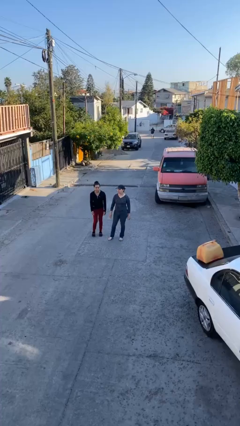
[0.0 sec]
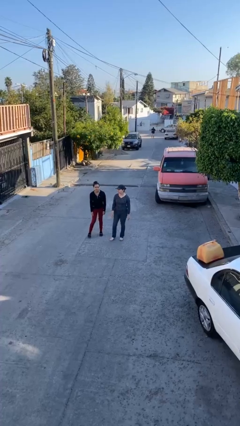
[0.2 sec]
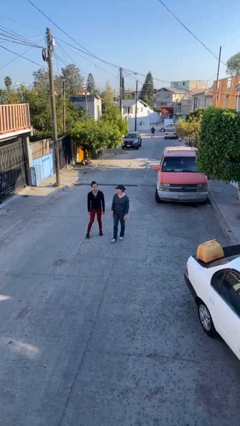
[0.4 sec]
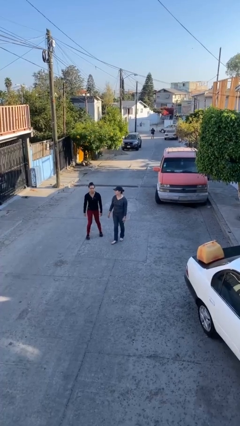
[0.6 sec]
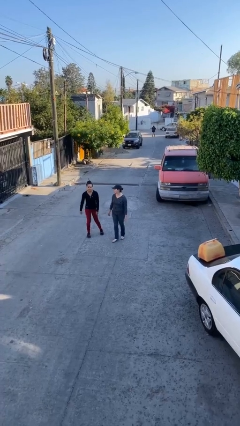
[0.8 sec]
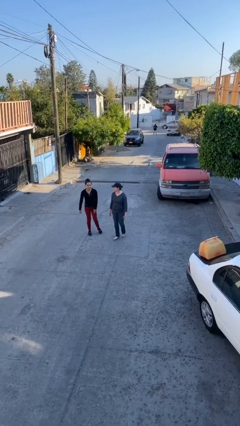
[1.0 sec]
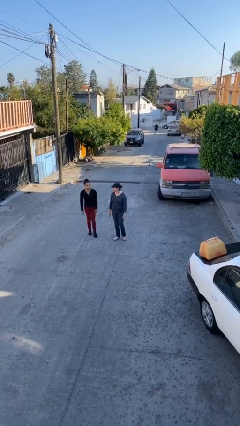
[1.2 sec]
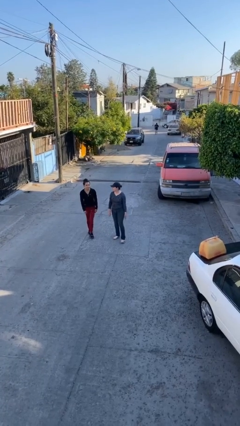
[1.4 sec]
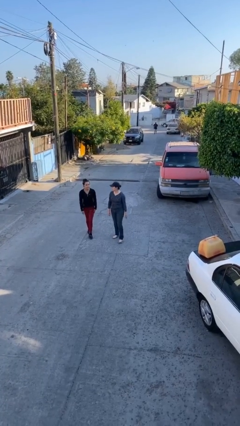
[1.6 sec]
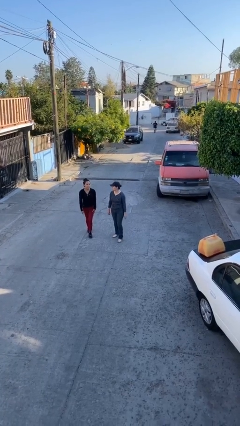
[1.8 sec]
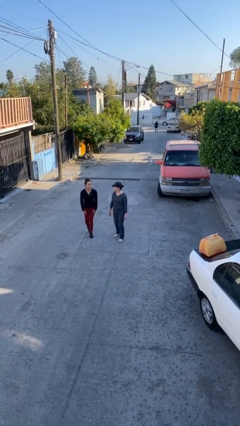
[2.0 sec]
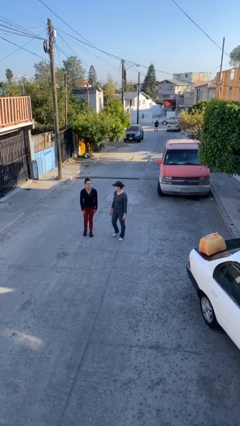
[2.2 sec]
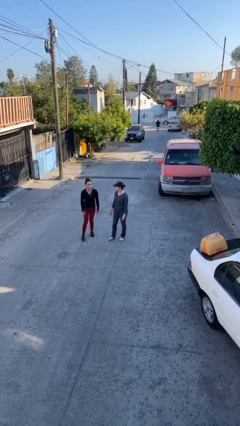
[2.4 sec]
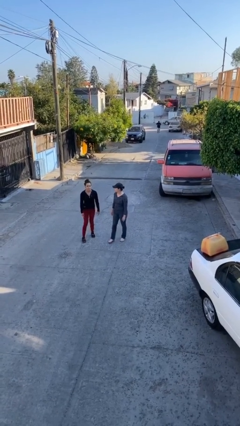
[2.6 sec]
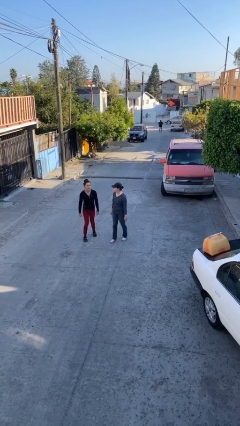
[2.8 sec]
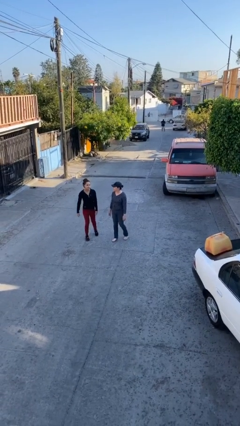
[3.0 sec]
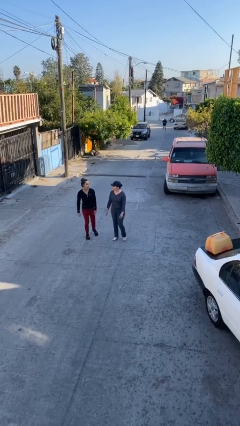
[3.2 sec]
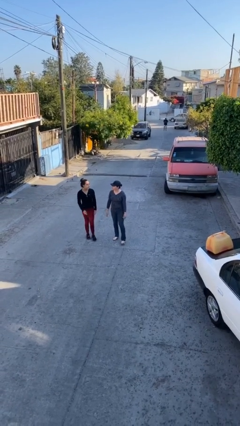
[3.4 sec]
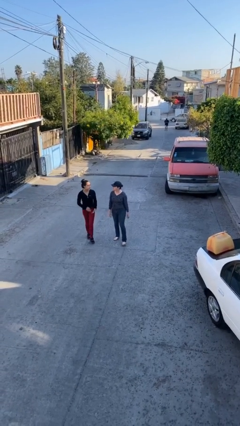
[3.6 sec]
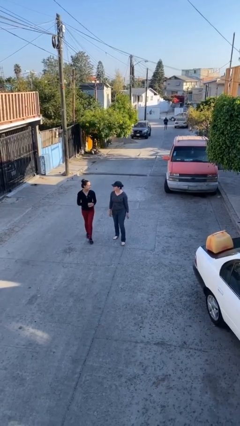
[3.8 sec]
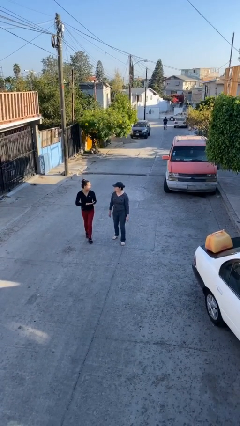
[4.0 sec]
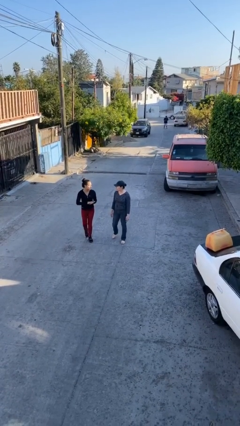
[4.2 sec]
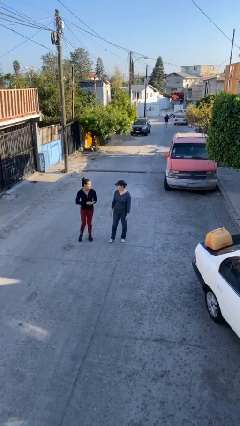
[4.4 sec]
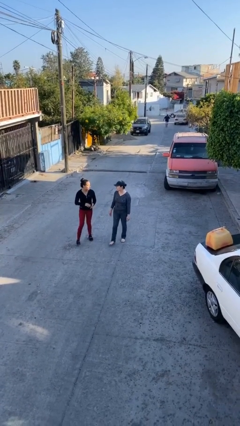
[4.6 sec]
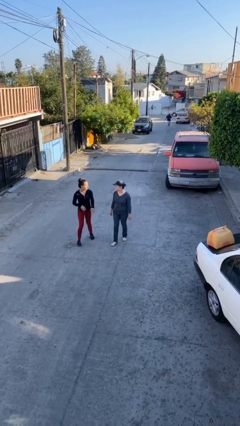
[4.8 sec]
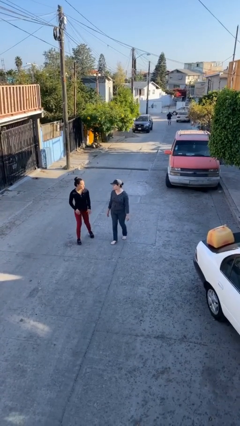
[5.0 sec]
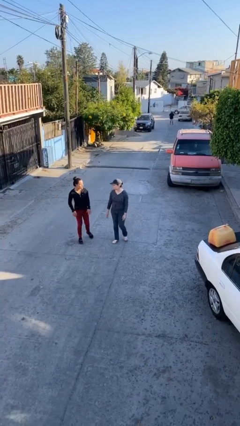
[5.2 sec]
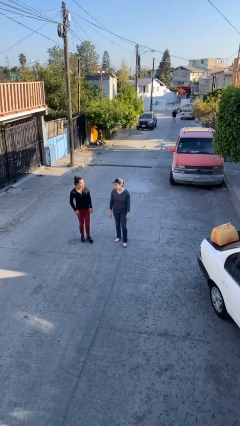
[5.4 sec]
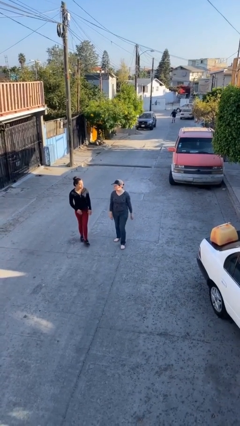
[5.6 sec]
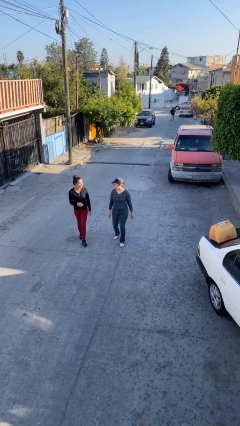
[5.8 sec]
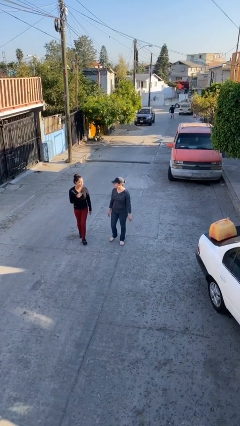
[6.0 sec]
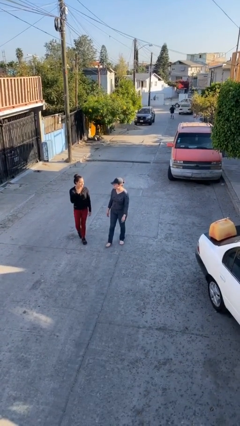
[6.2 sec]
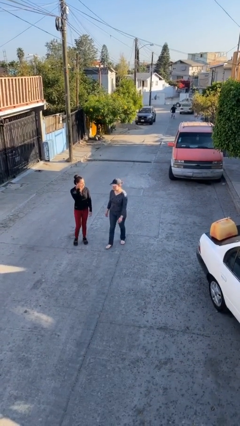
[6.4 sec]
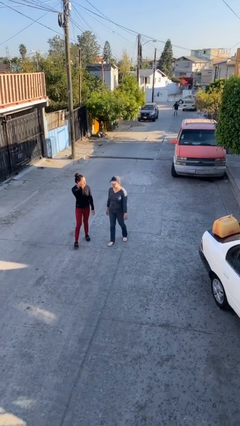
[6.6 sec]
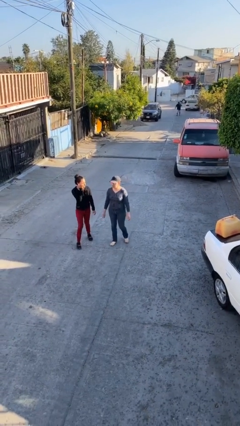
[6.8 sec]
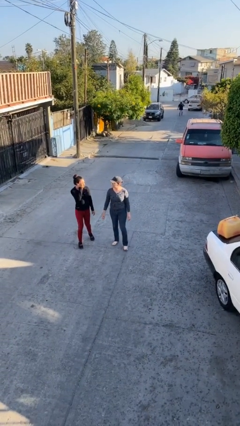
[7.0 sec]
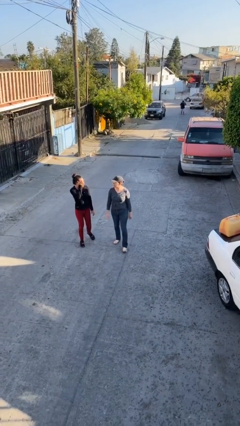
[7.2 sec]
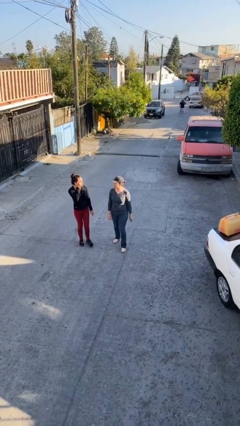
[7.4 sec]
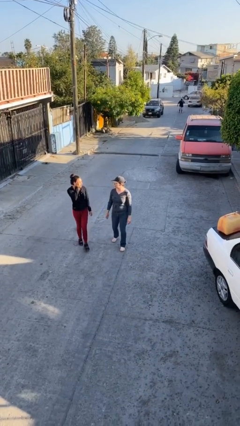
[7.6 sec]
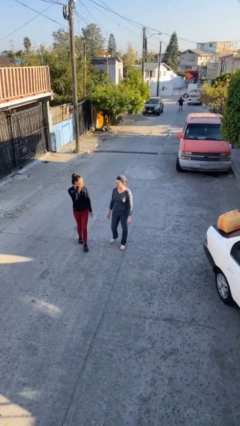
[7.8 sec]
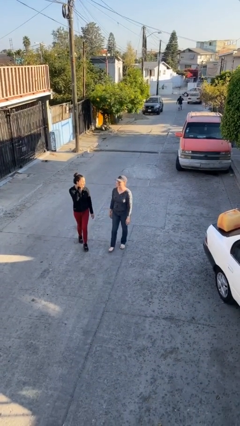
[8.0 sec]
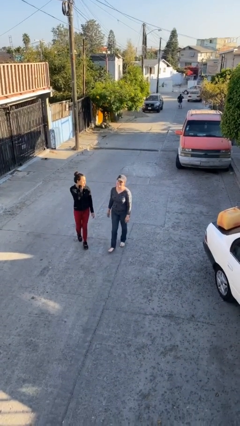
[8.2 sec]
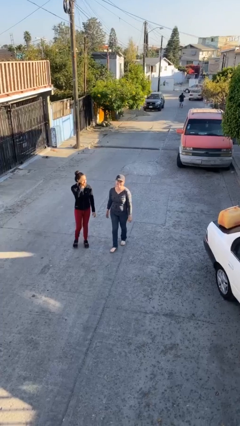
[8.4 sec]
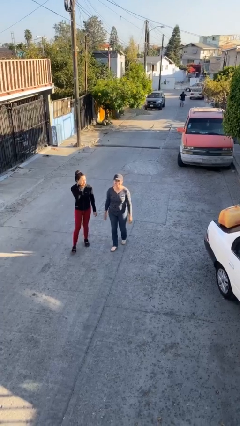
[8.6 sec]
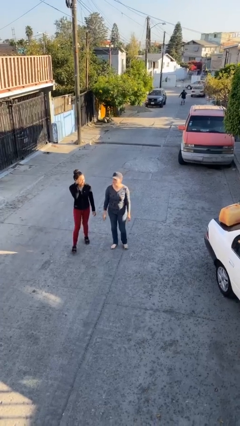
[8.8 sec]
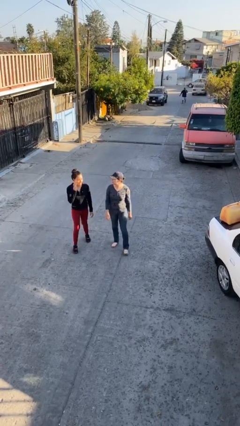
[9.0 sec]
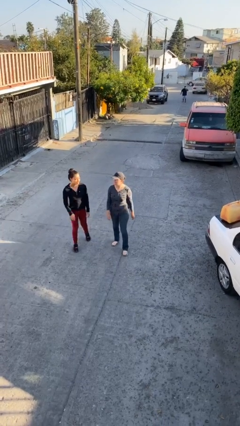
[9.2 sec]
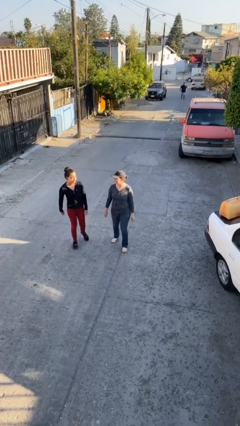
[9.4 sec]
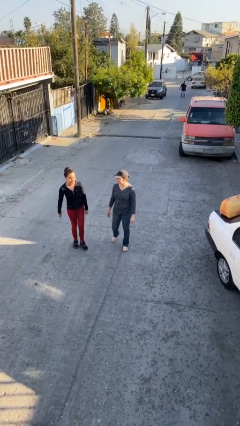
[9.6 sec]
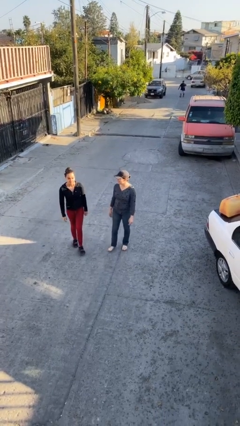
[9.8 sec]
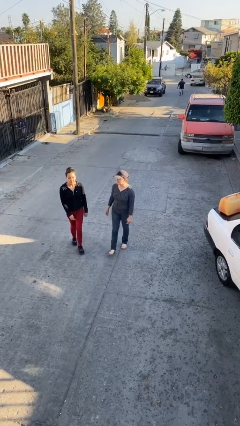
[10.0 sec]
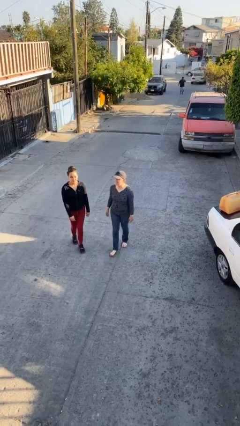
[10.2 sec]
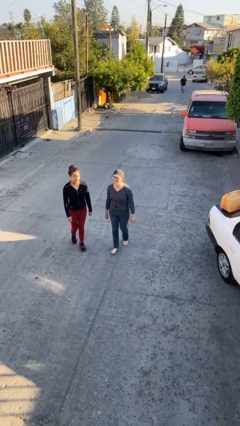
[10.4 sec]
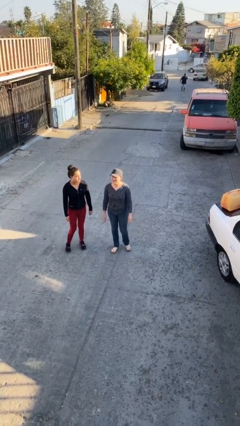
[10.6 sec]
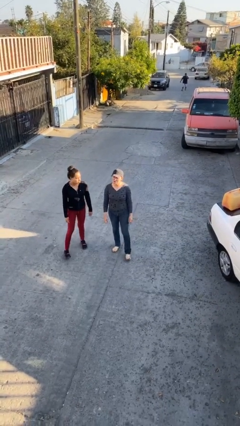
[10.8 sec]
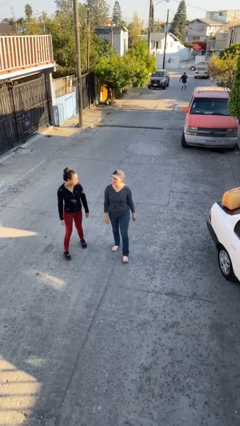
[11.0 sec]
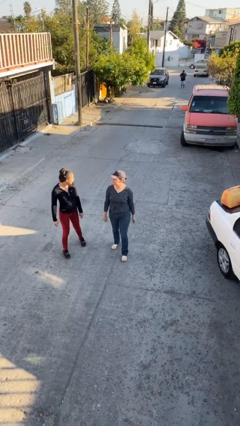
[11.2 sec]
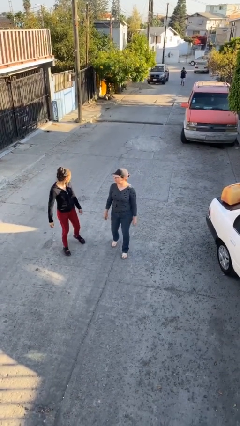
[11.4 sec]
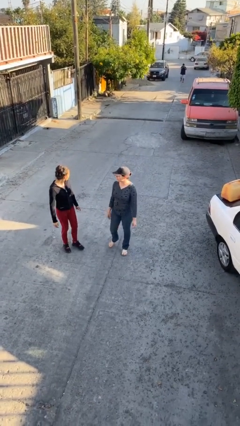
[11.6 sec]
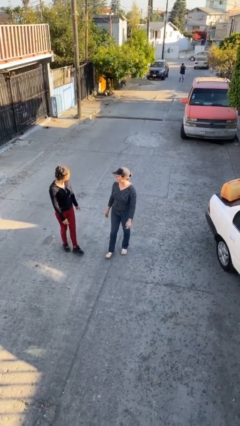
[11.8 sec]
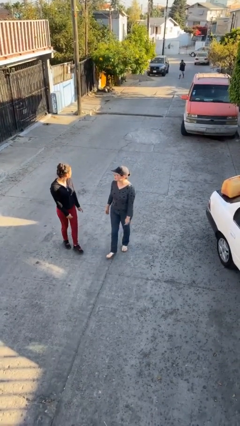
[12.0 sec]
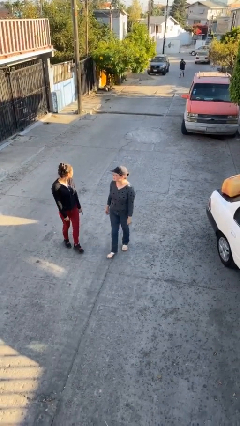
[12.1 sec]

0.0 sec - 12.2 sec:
person talks to person

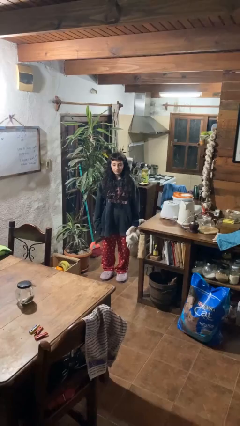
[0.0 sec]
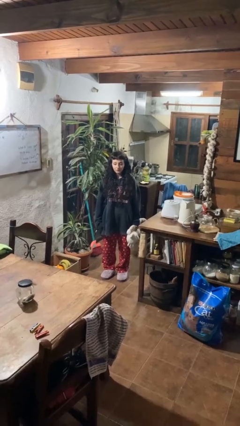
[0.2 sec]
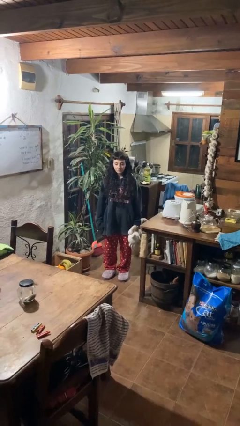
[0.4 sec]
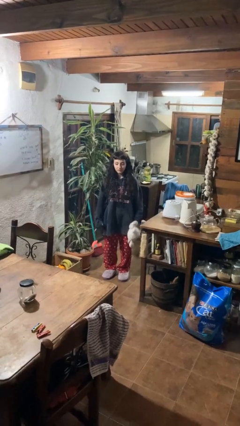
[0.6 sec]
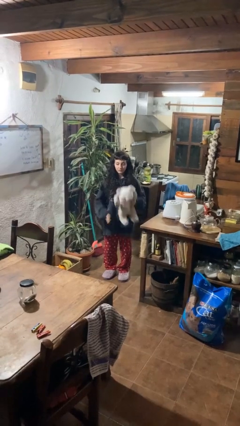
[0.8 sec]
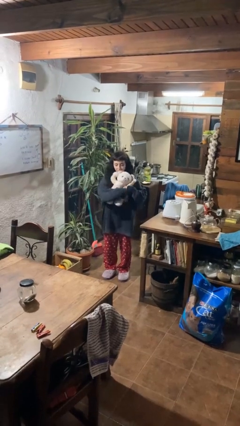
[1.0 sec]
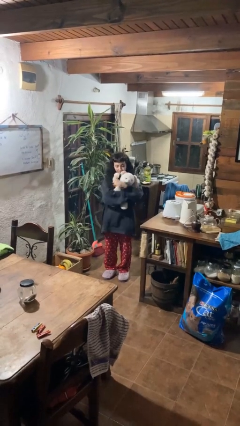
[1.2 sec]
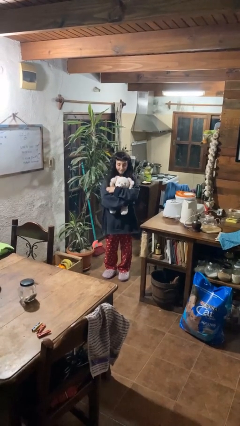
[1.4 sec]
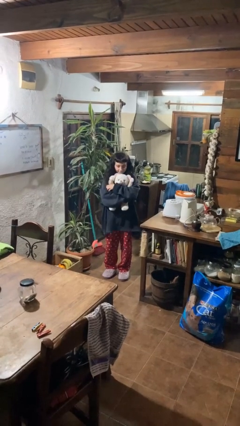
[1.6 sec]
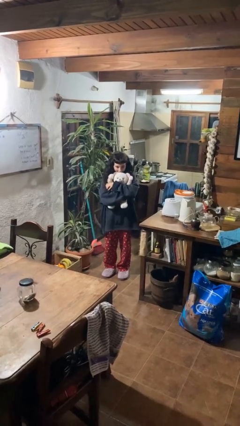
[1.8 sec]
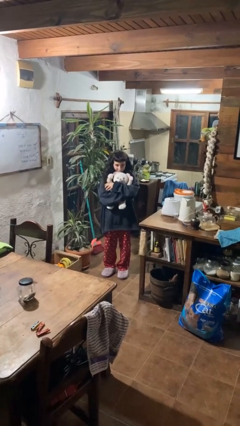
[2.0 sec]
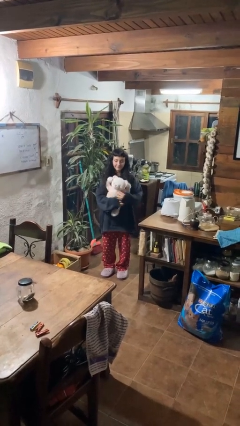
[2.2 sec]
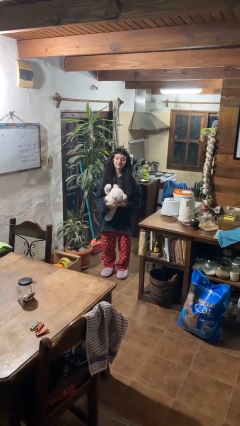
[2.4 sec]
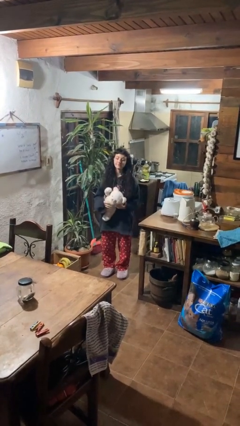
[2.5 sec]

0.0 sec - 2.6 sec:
person hugs stuffed animal

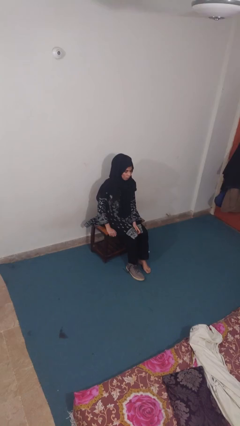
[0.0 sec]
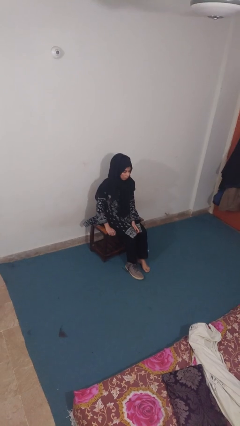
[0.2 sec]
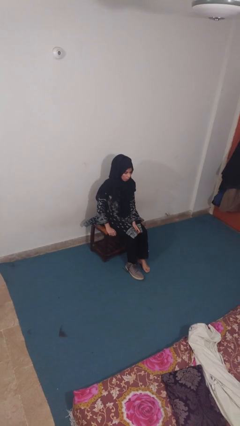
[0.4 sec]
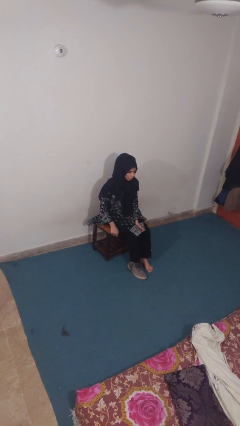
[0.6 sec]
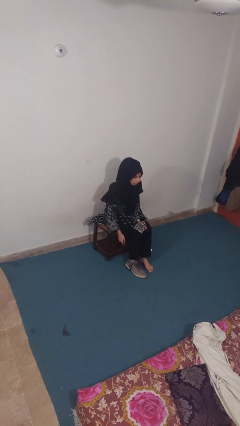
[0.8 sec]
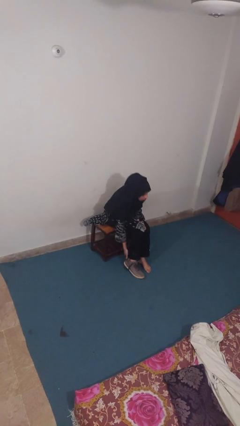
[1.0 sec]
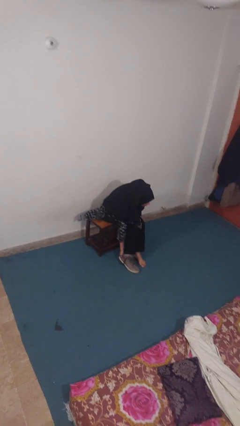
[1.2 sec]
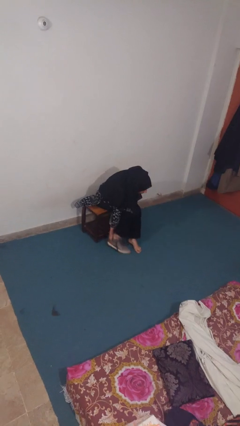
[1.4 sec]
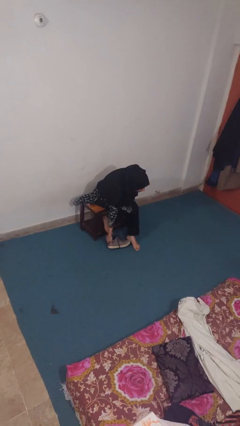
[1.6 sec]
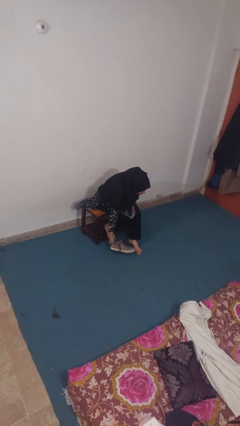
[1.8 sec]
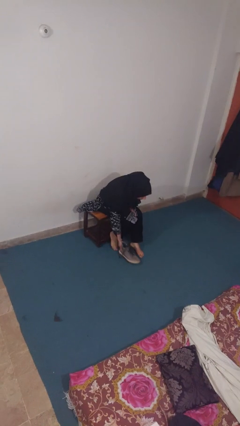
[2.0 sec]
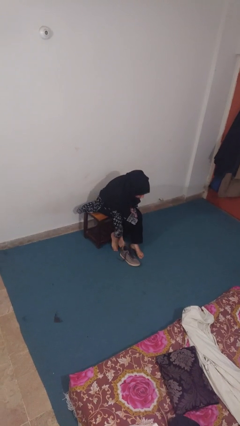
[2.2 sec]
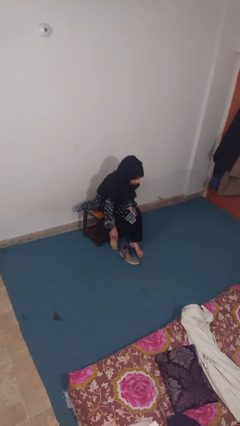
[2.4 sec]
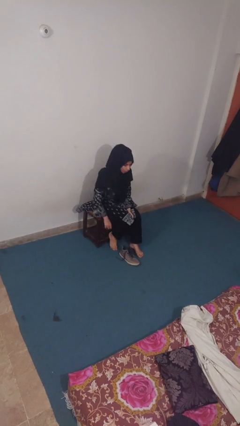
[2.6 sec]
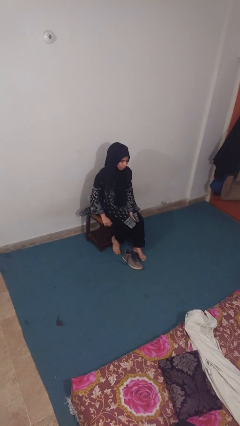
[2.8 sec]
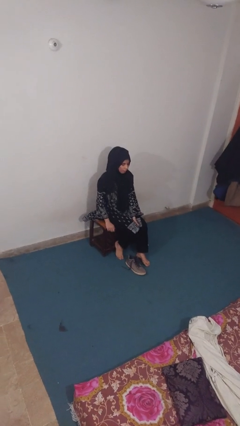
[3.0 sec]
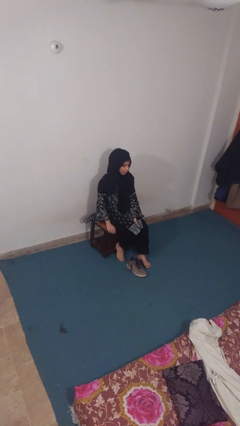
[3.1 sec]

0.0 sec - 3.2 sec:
person takes off boots

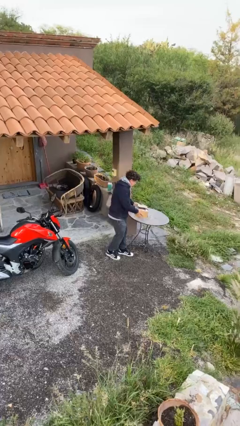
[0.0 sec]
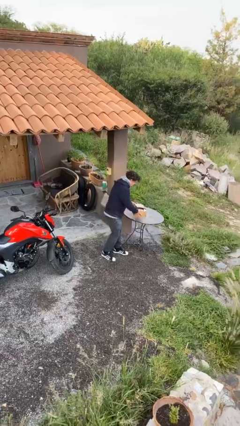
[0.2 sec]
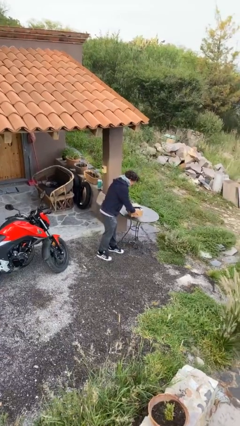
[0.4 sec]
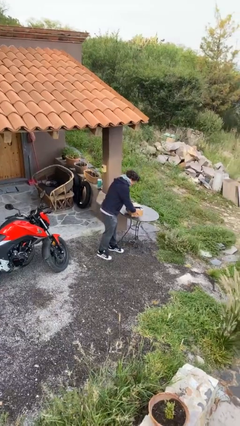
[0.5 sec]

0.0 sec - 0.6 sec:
person puts down object on table
